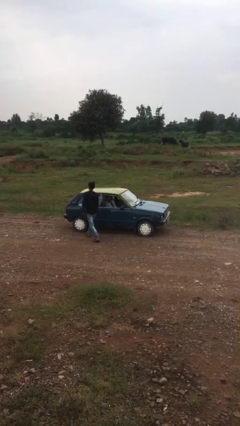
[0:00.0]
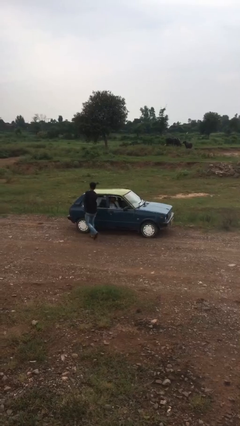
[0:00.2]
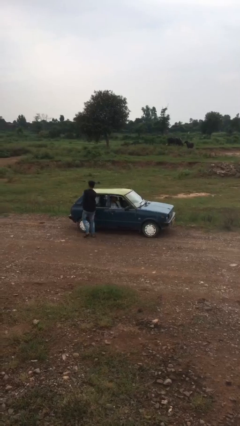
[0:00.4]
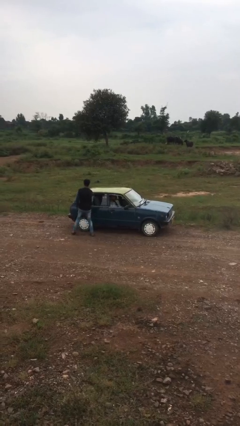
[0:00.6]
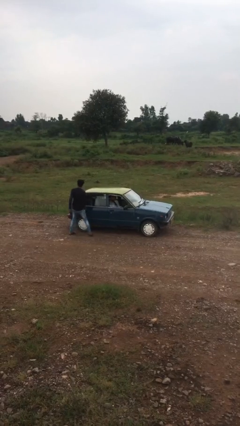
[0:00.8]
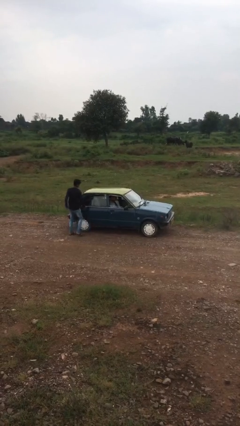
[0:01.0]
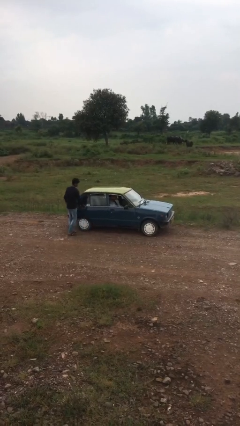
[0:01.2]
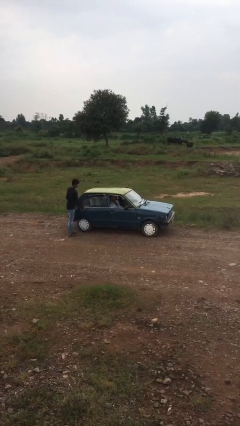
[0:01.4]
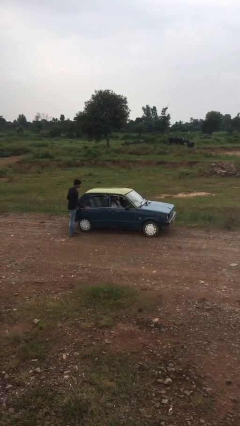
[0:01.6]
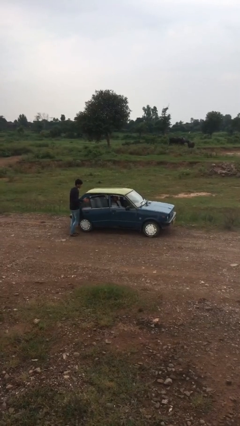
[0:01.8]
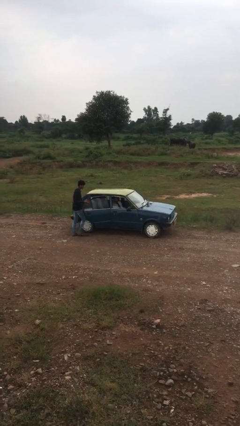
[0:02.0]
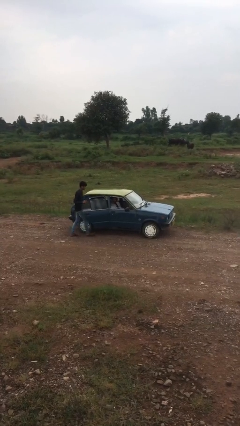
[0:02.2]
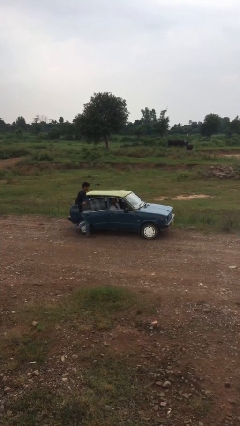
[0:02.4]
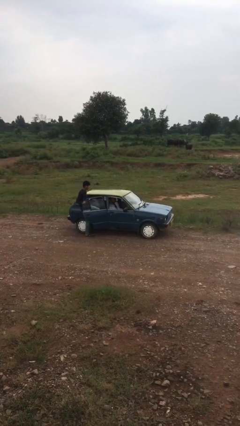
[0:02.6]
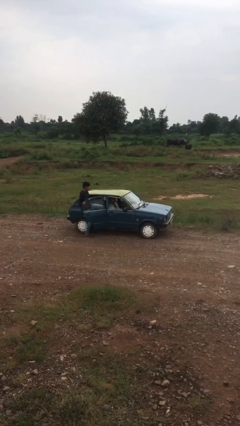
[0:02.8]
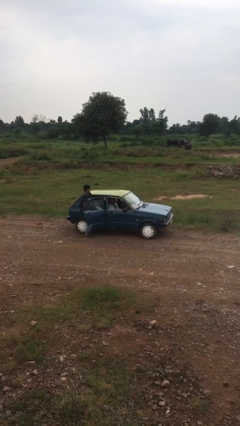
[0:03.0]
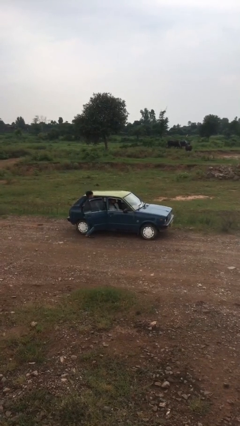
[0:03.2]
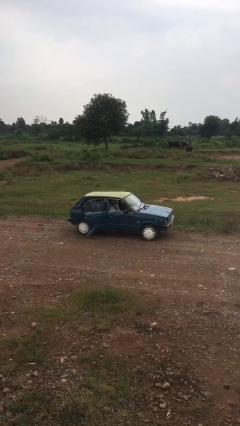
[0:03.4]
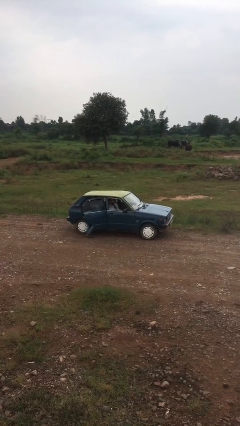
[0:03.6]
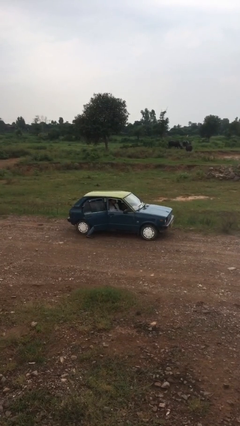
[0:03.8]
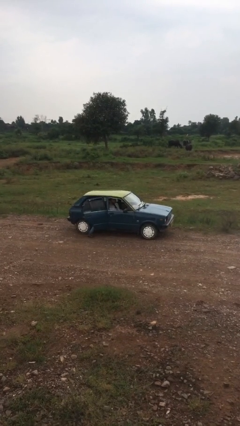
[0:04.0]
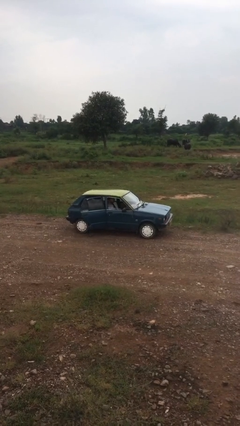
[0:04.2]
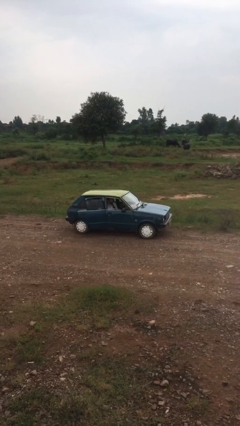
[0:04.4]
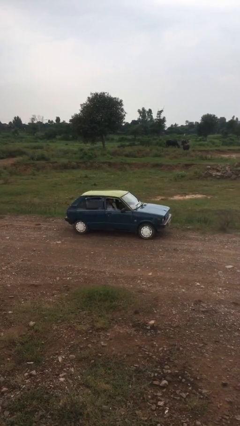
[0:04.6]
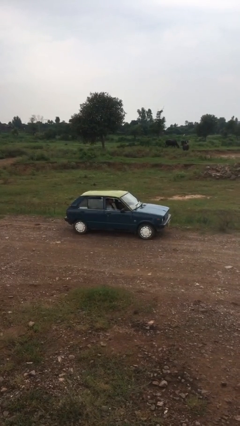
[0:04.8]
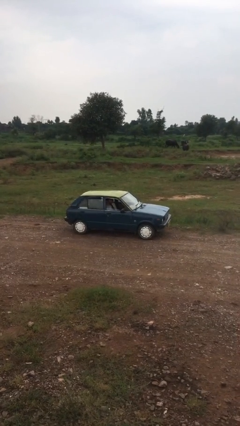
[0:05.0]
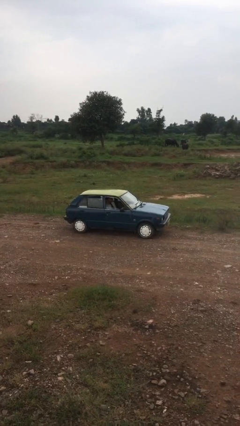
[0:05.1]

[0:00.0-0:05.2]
car picks up person

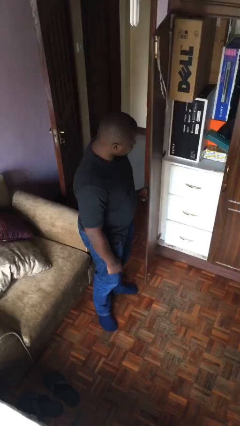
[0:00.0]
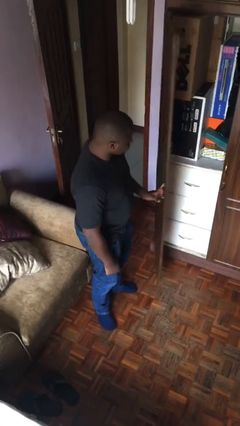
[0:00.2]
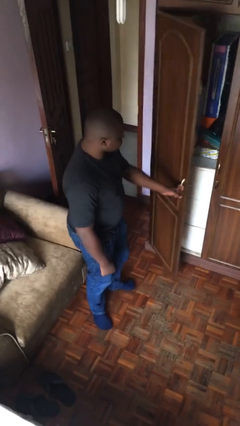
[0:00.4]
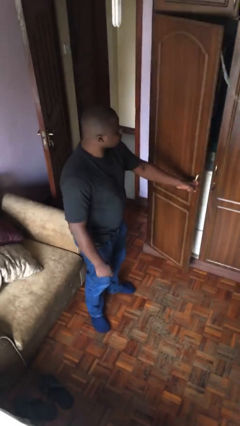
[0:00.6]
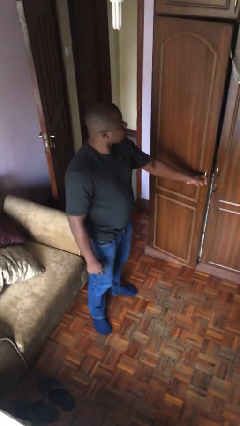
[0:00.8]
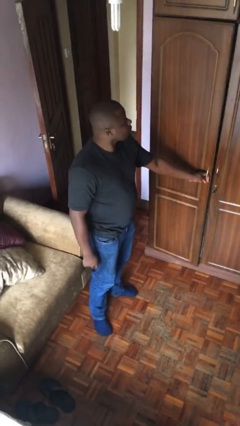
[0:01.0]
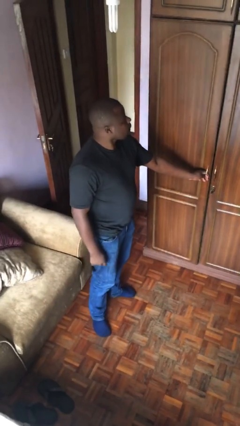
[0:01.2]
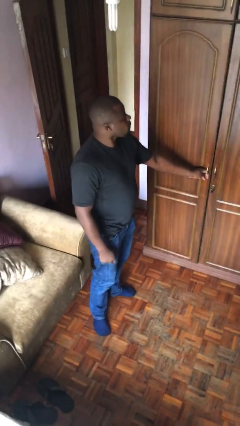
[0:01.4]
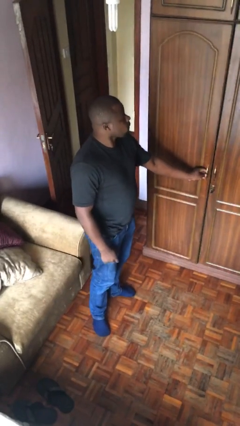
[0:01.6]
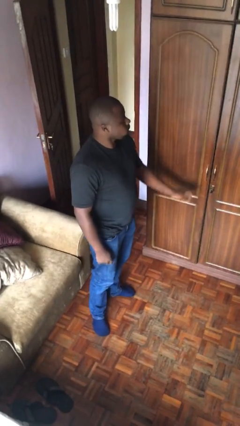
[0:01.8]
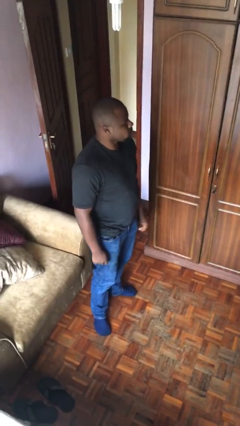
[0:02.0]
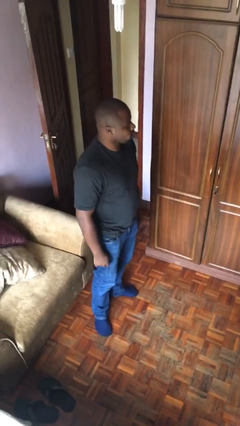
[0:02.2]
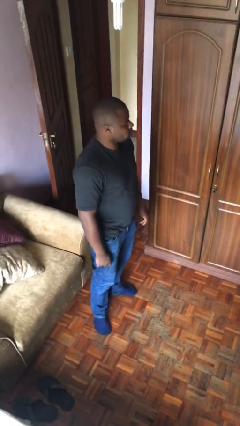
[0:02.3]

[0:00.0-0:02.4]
person closes dresser drawer

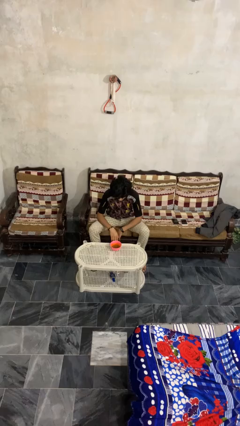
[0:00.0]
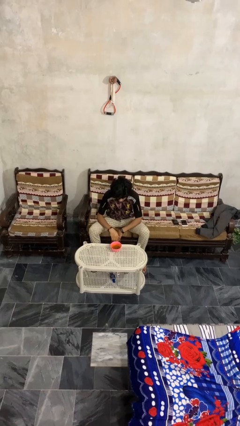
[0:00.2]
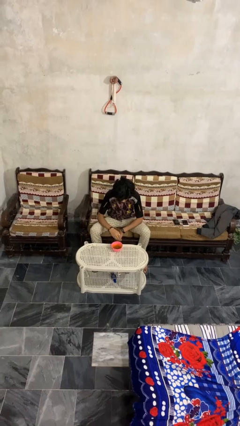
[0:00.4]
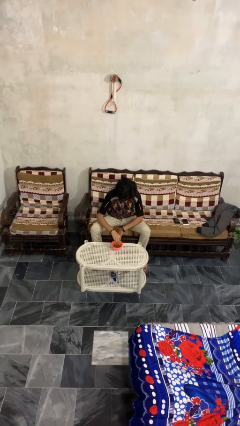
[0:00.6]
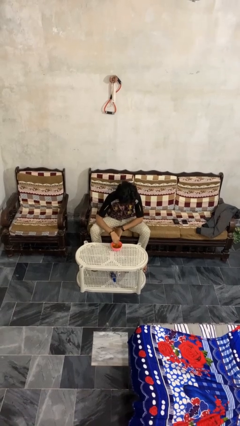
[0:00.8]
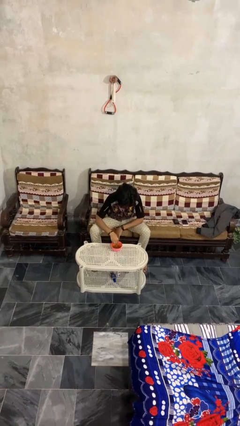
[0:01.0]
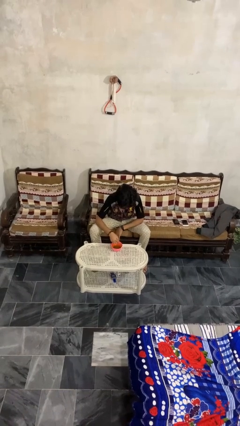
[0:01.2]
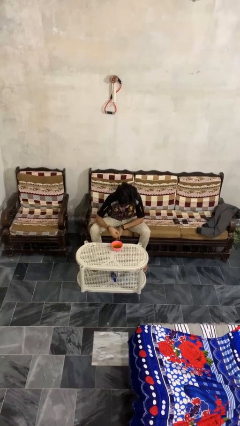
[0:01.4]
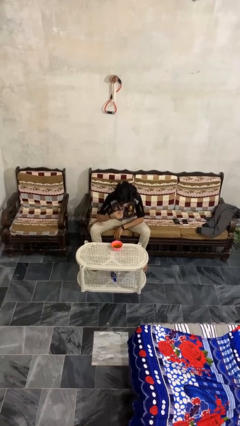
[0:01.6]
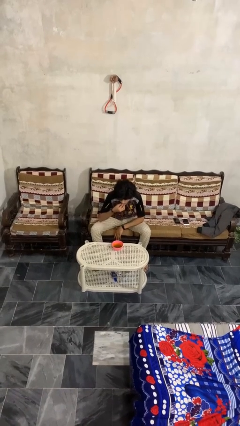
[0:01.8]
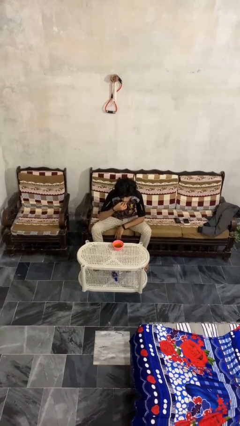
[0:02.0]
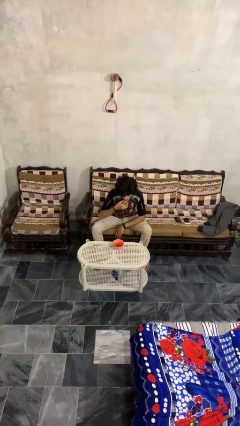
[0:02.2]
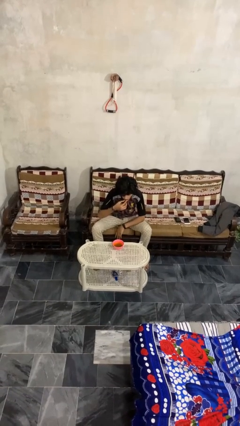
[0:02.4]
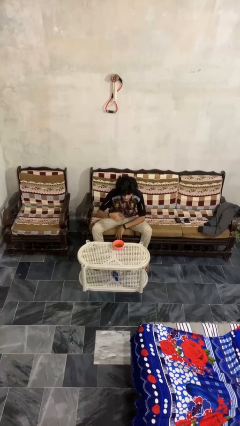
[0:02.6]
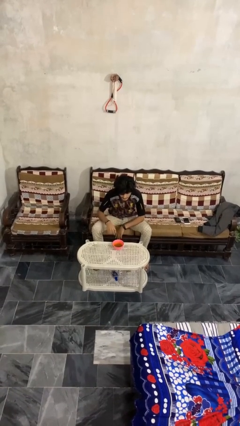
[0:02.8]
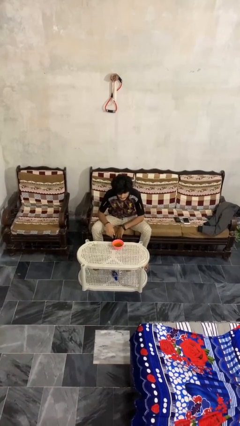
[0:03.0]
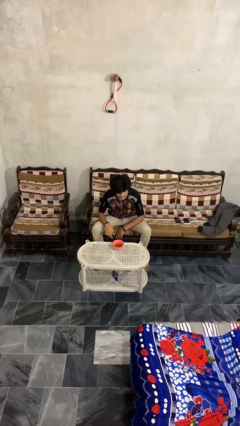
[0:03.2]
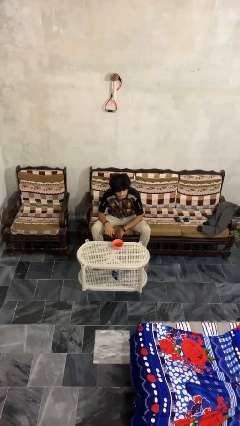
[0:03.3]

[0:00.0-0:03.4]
person eats with hands

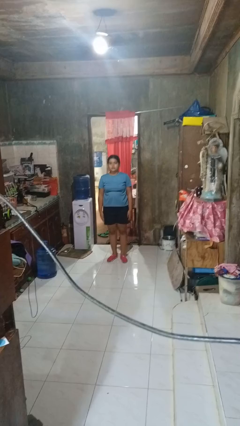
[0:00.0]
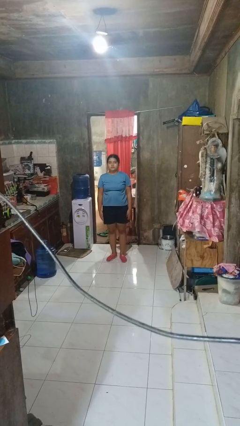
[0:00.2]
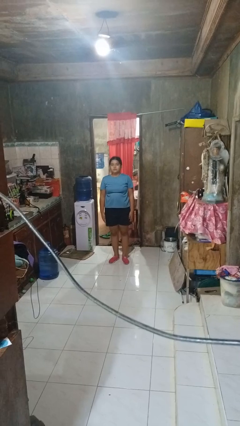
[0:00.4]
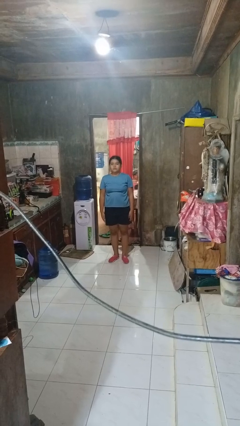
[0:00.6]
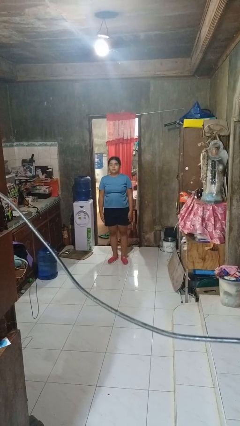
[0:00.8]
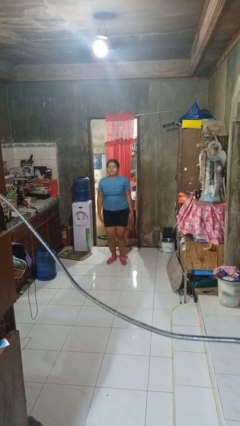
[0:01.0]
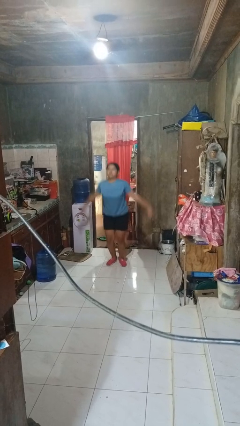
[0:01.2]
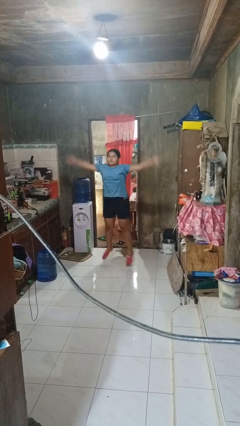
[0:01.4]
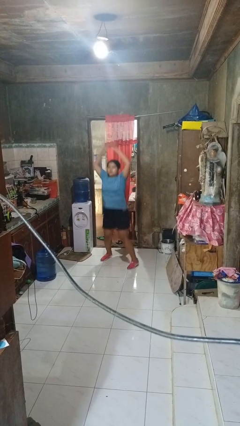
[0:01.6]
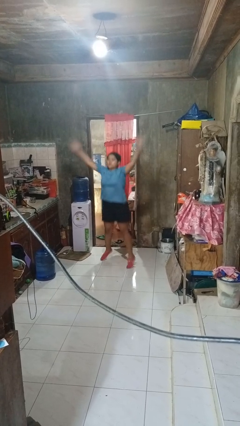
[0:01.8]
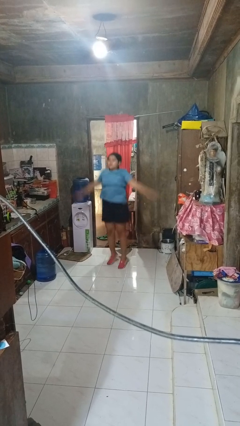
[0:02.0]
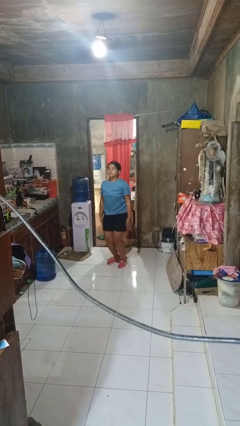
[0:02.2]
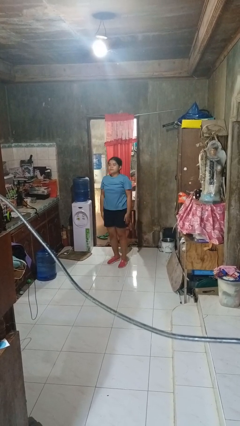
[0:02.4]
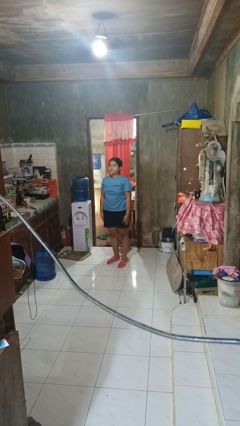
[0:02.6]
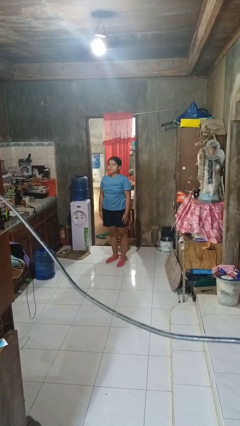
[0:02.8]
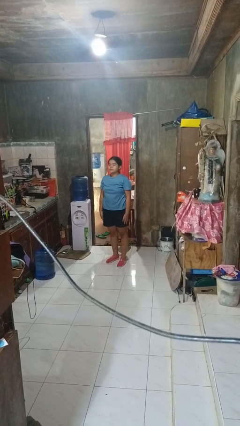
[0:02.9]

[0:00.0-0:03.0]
person exercises with jumping jacks

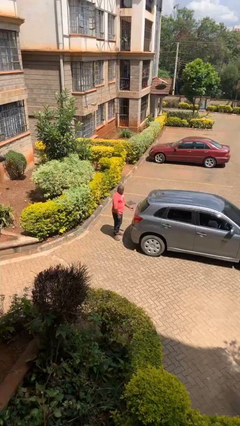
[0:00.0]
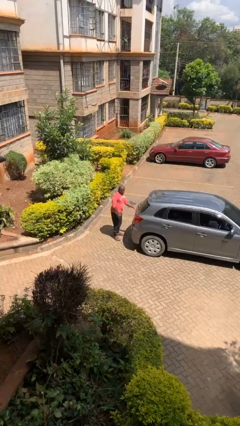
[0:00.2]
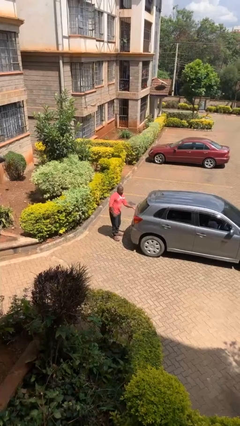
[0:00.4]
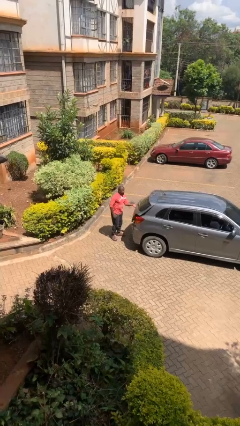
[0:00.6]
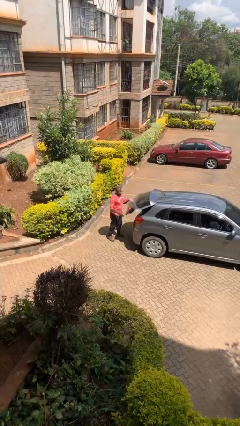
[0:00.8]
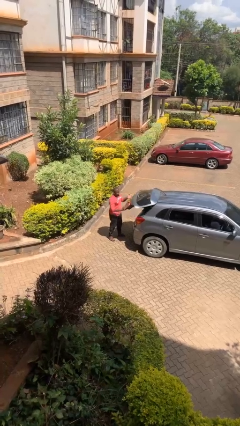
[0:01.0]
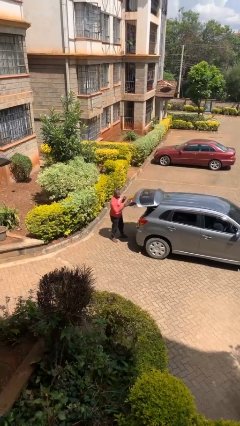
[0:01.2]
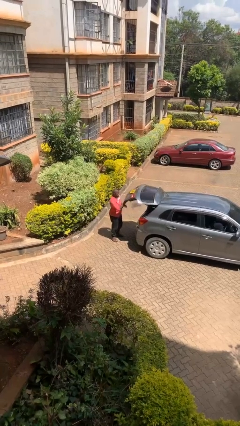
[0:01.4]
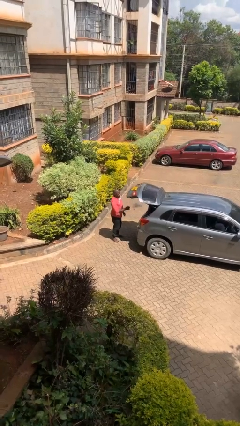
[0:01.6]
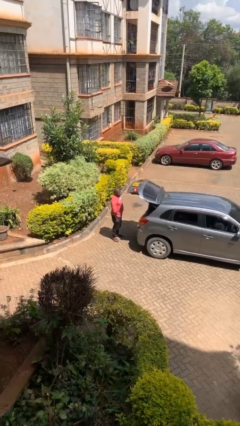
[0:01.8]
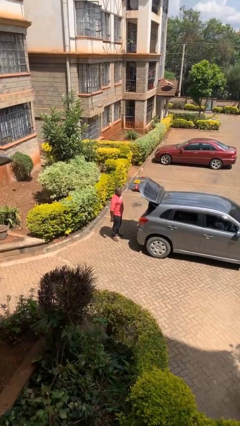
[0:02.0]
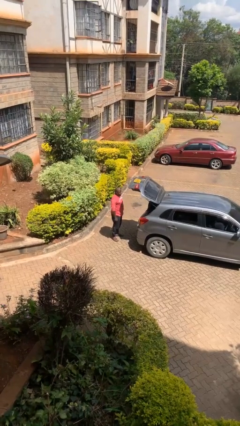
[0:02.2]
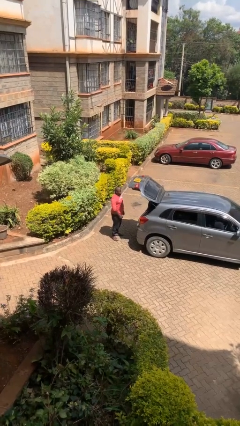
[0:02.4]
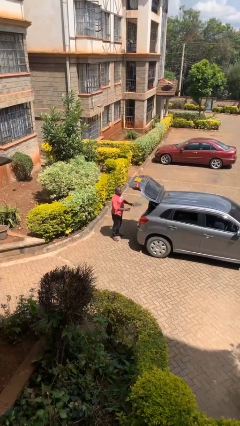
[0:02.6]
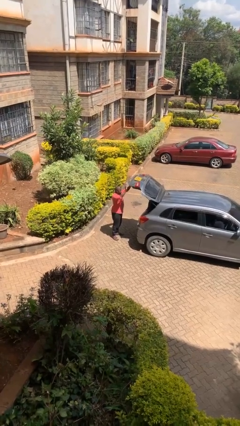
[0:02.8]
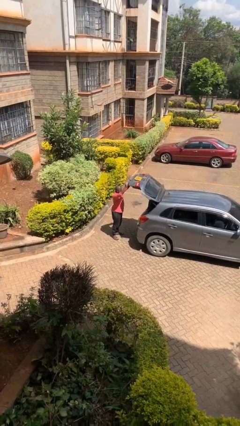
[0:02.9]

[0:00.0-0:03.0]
person opens car trunk

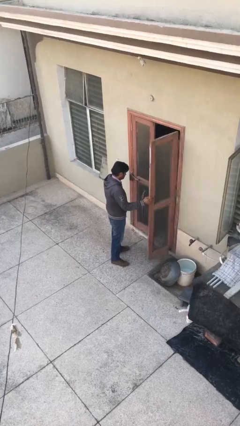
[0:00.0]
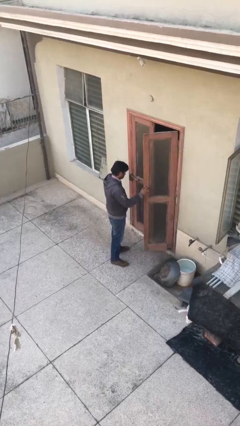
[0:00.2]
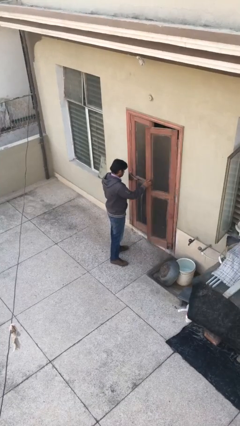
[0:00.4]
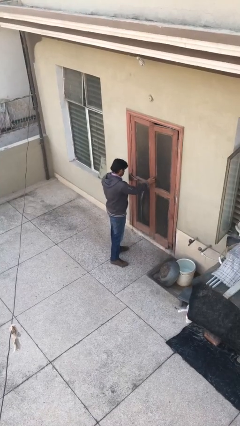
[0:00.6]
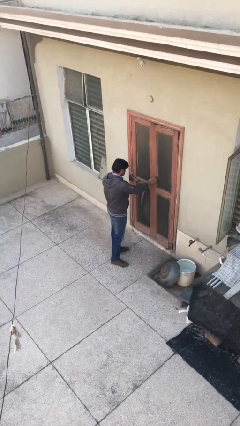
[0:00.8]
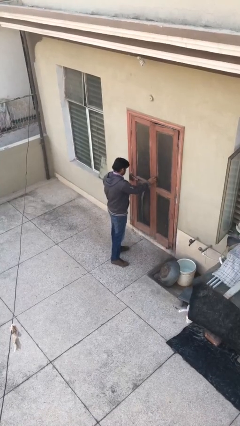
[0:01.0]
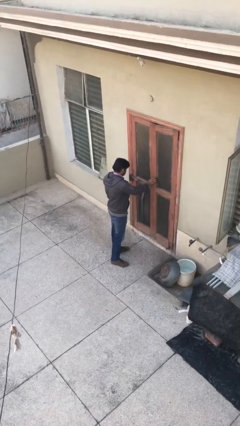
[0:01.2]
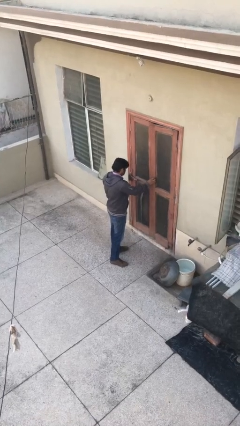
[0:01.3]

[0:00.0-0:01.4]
person closes facility door
